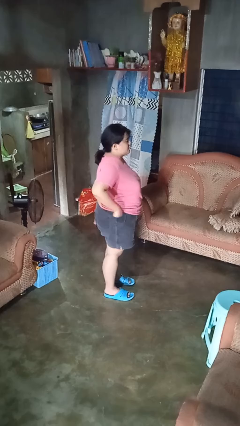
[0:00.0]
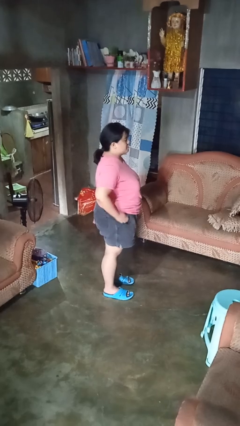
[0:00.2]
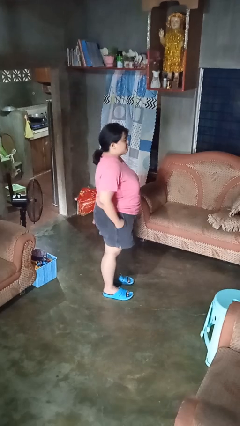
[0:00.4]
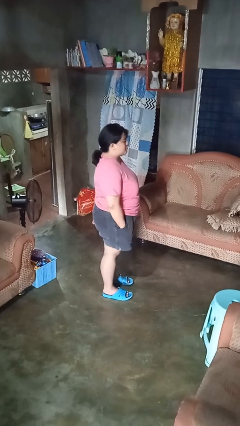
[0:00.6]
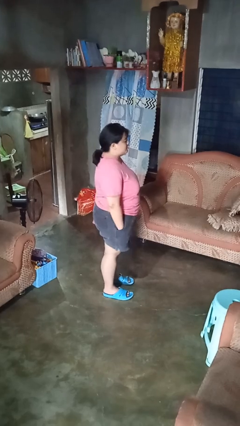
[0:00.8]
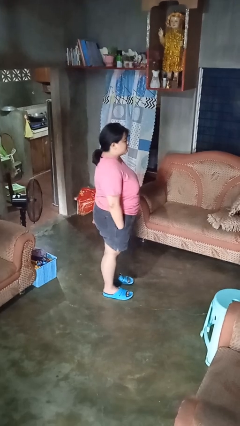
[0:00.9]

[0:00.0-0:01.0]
person puts hands in back pockets

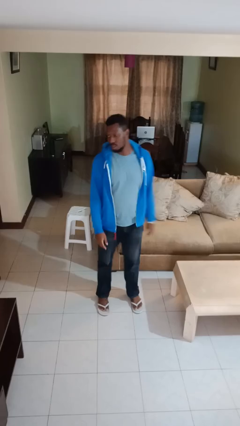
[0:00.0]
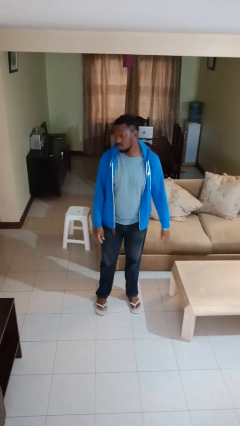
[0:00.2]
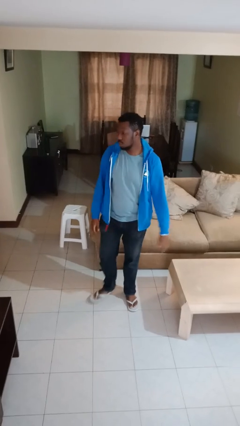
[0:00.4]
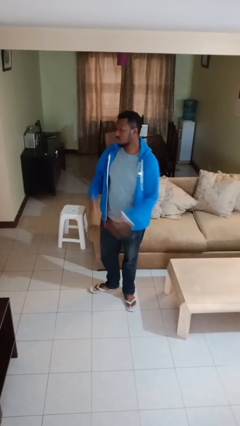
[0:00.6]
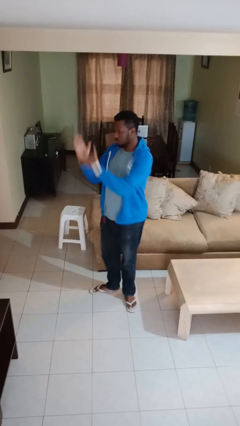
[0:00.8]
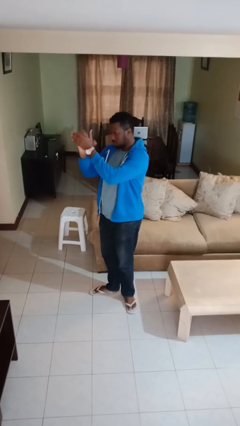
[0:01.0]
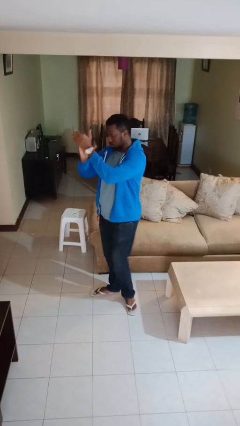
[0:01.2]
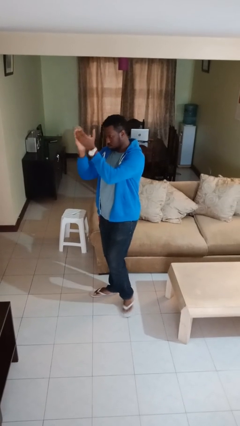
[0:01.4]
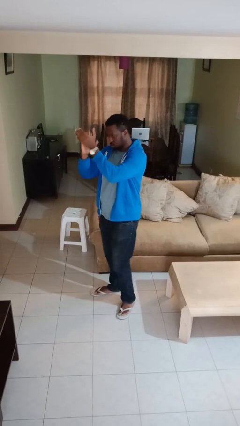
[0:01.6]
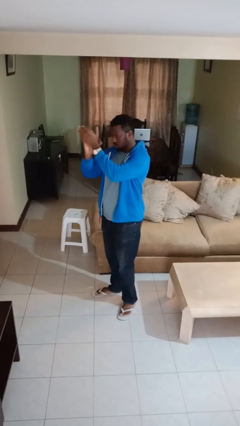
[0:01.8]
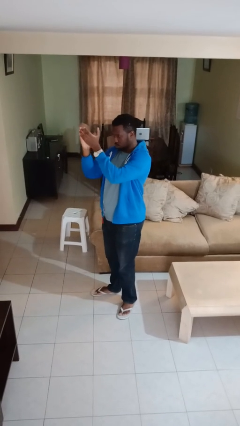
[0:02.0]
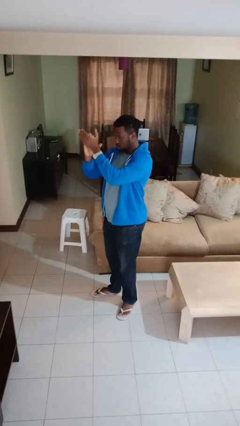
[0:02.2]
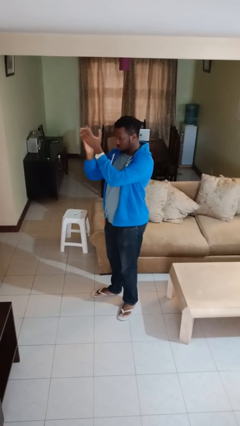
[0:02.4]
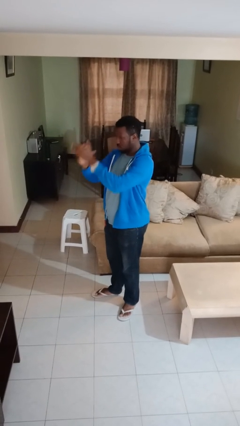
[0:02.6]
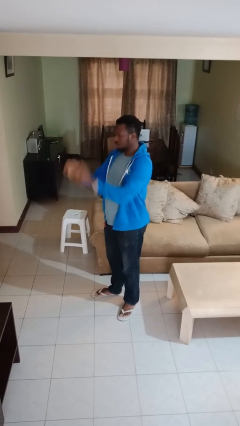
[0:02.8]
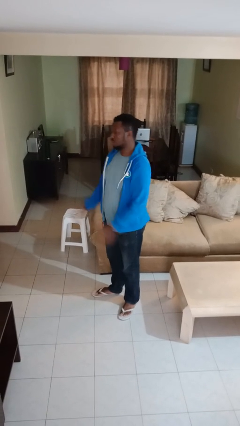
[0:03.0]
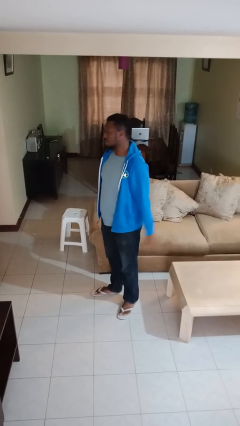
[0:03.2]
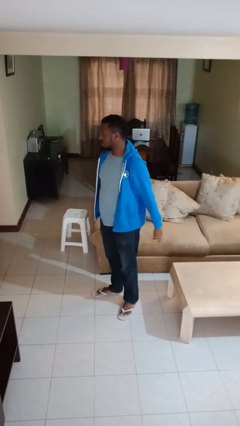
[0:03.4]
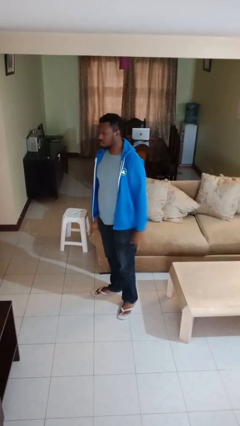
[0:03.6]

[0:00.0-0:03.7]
person claps hands

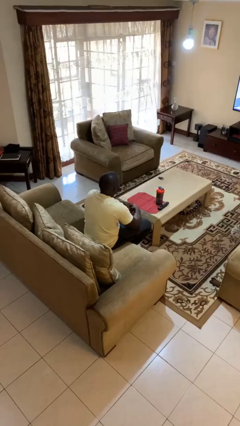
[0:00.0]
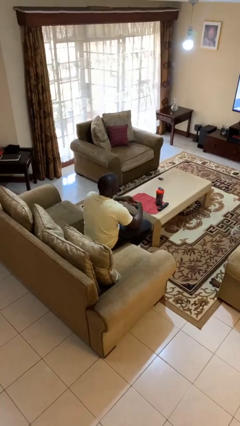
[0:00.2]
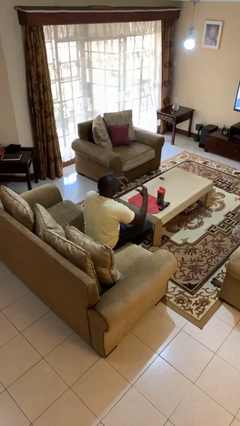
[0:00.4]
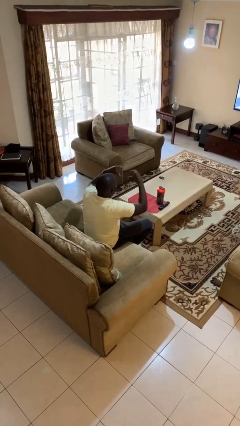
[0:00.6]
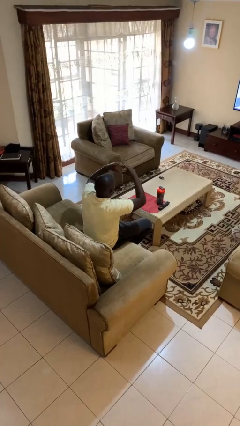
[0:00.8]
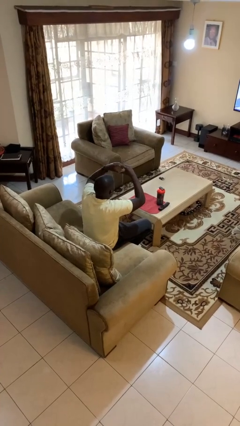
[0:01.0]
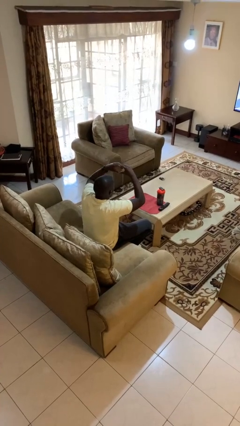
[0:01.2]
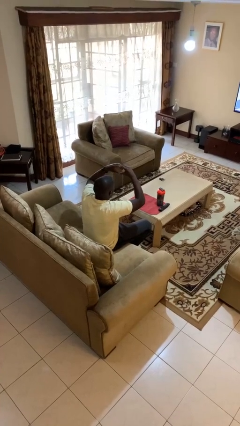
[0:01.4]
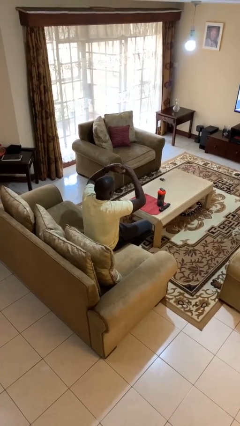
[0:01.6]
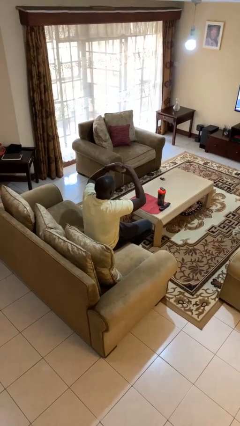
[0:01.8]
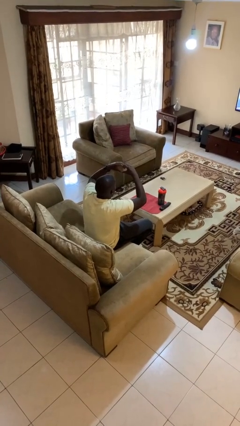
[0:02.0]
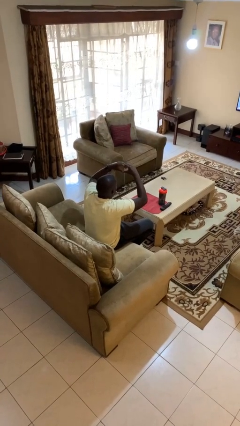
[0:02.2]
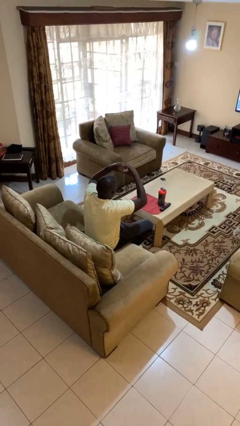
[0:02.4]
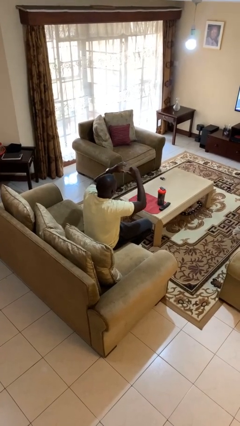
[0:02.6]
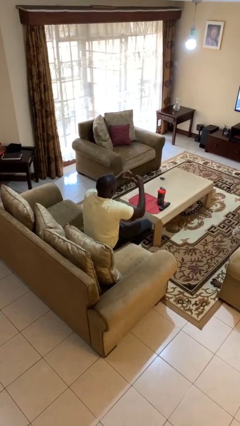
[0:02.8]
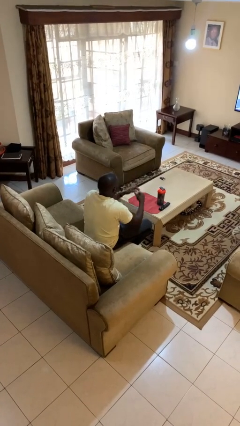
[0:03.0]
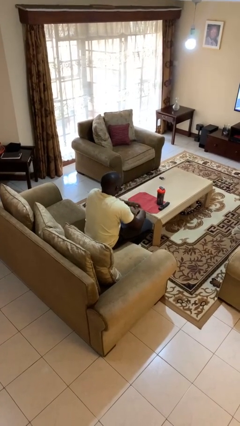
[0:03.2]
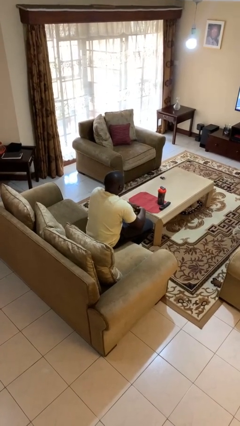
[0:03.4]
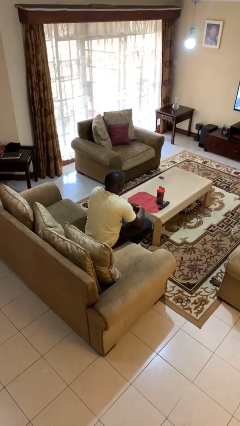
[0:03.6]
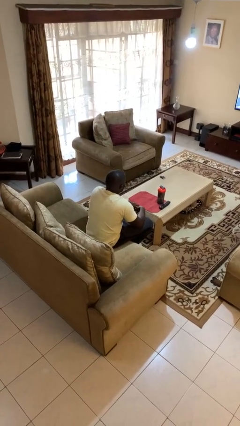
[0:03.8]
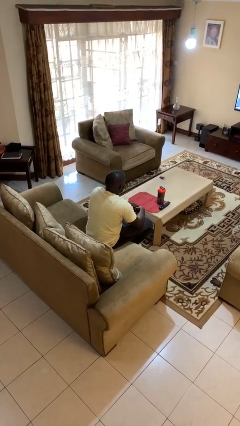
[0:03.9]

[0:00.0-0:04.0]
person gestures heart

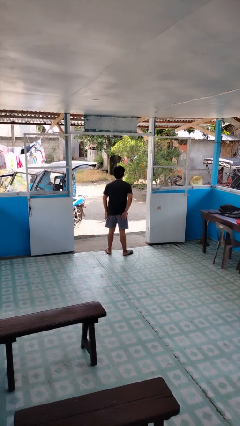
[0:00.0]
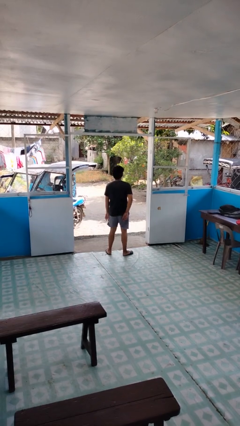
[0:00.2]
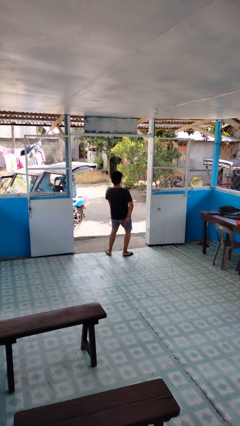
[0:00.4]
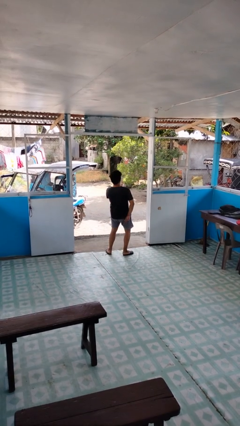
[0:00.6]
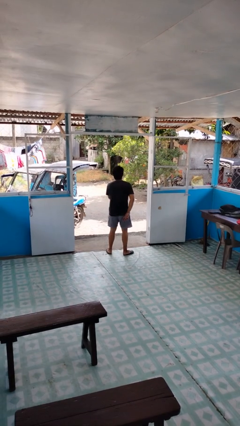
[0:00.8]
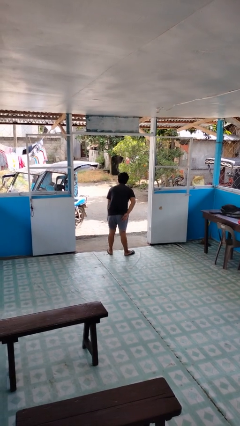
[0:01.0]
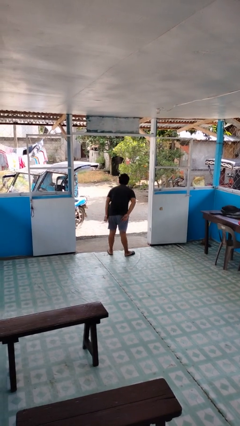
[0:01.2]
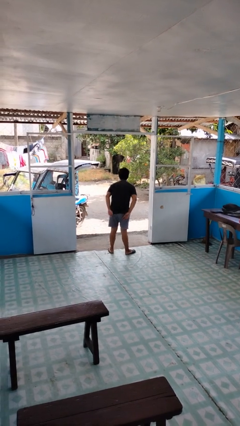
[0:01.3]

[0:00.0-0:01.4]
person wiggles hips

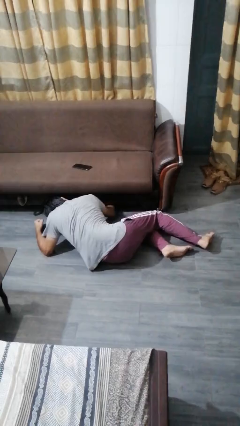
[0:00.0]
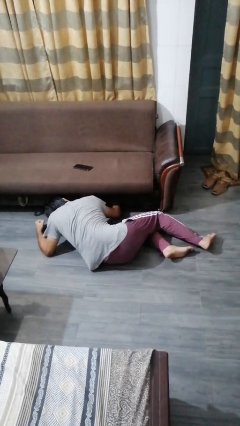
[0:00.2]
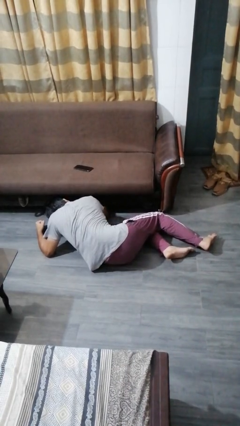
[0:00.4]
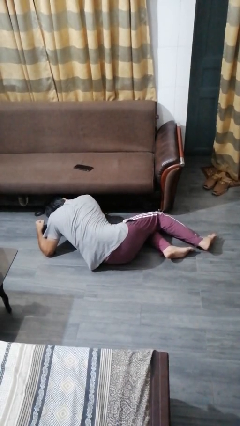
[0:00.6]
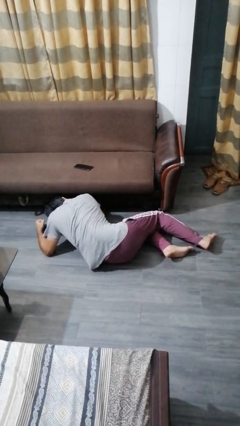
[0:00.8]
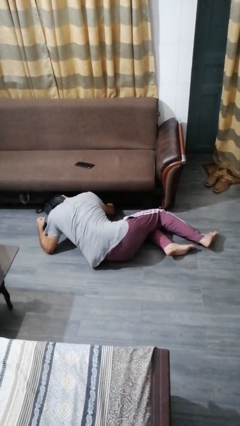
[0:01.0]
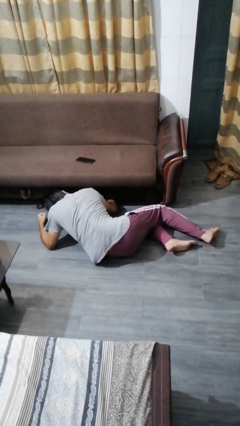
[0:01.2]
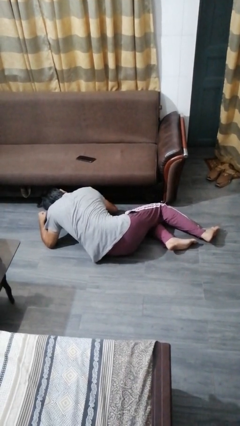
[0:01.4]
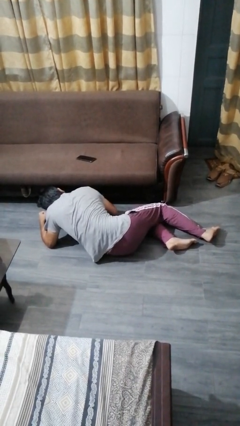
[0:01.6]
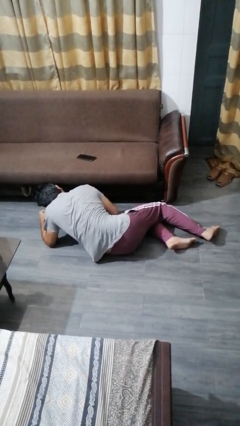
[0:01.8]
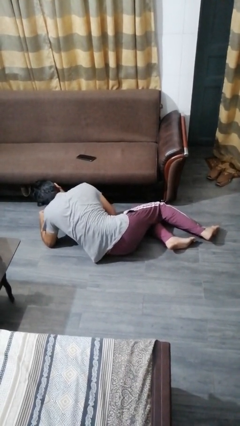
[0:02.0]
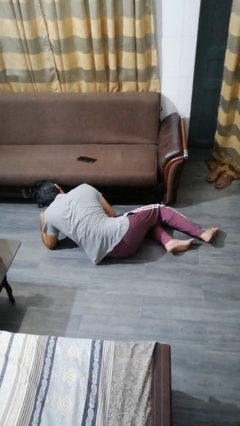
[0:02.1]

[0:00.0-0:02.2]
person searches under couch

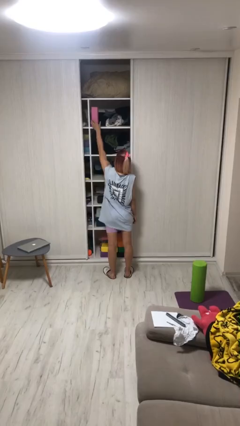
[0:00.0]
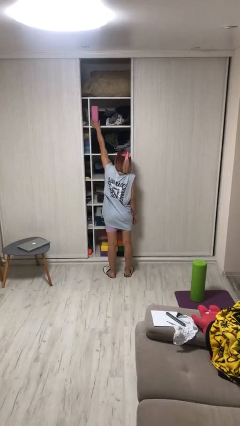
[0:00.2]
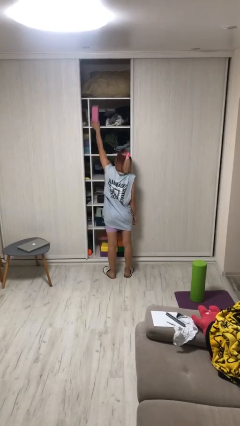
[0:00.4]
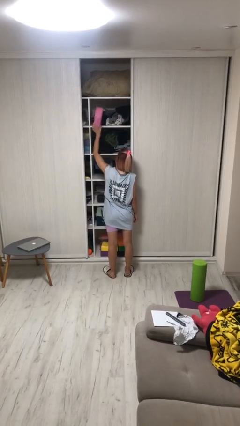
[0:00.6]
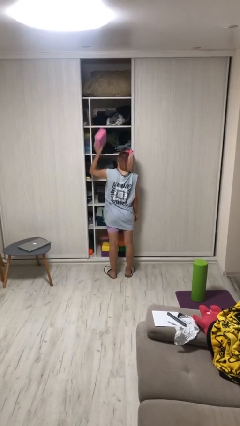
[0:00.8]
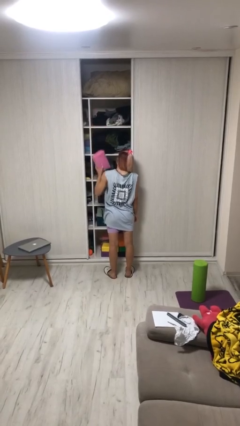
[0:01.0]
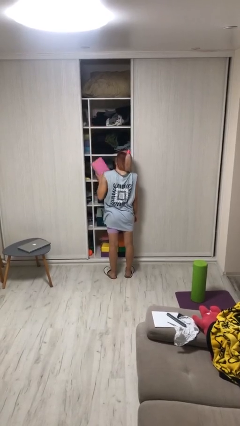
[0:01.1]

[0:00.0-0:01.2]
person picks up object from shelf

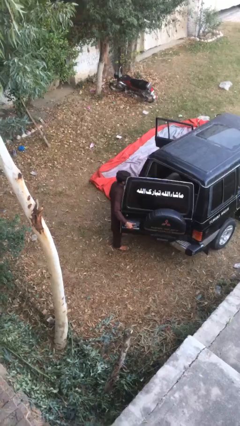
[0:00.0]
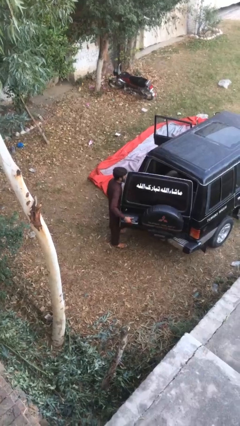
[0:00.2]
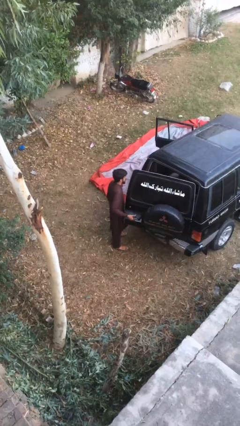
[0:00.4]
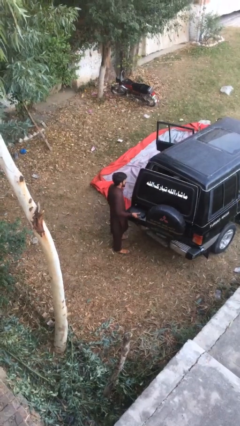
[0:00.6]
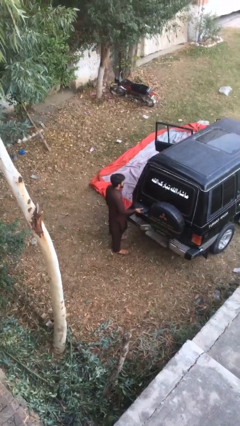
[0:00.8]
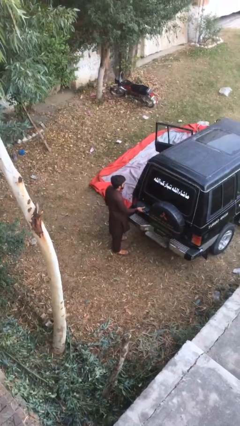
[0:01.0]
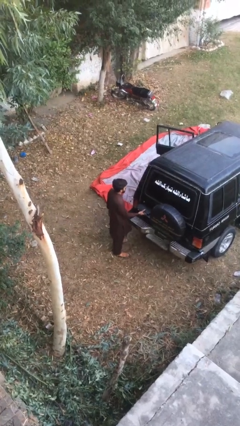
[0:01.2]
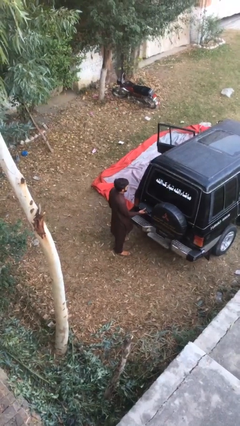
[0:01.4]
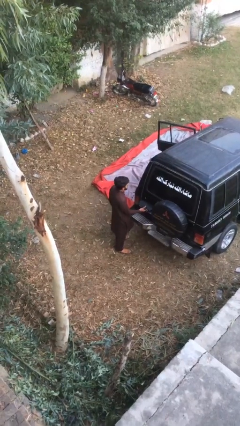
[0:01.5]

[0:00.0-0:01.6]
person closes car trunk

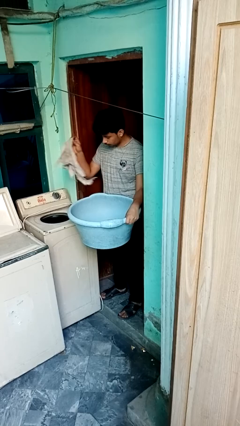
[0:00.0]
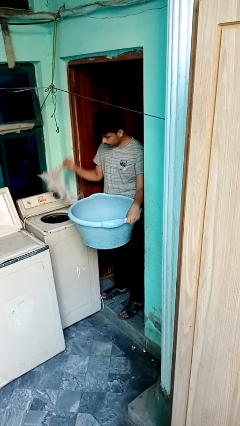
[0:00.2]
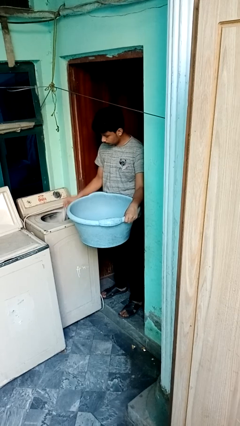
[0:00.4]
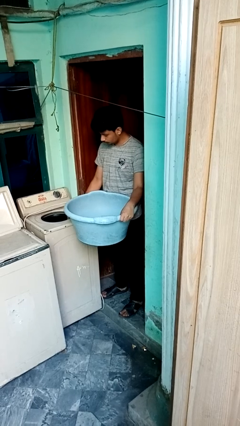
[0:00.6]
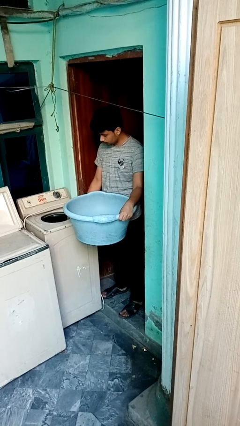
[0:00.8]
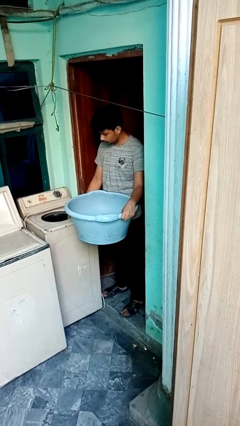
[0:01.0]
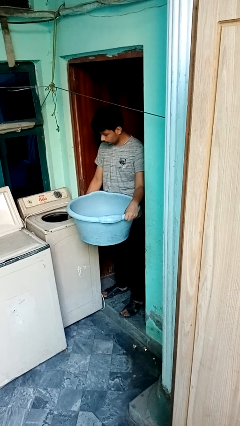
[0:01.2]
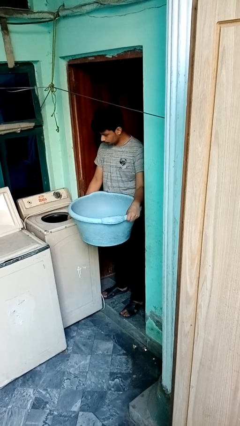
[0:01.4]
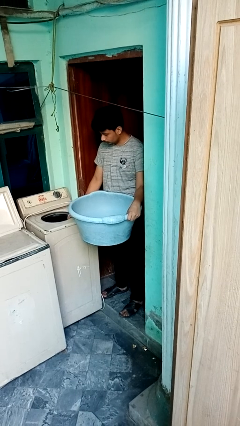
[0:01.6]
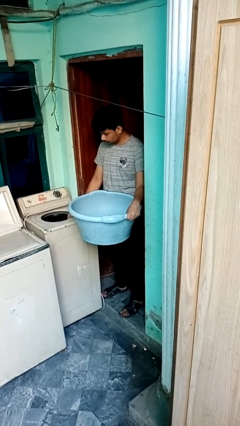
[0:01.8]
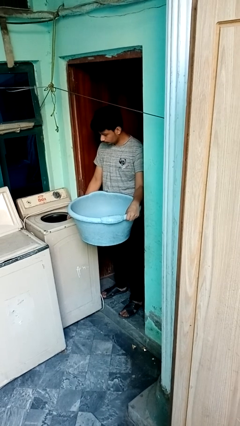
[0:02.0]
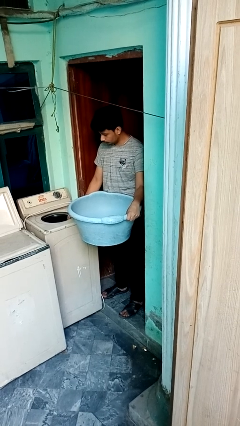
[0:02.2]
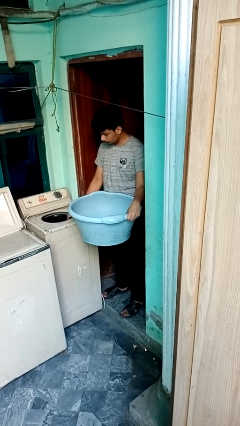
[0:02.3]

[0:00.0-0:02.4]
person loads dryer
